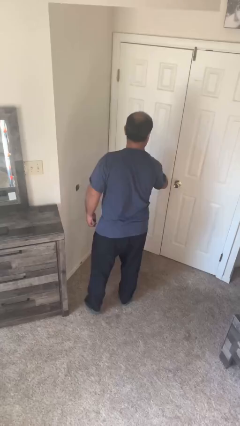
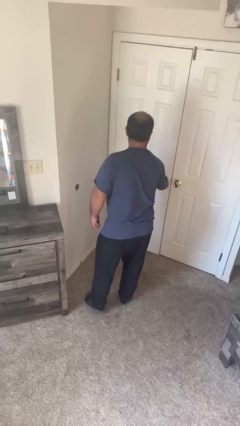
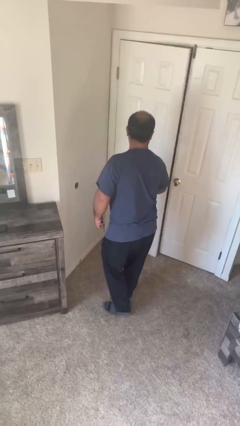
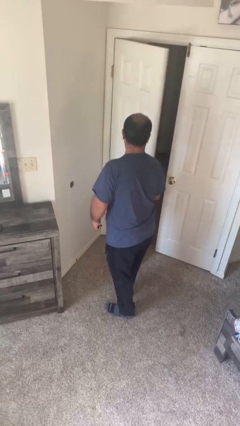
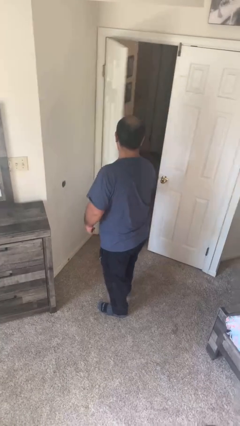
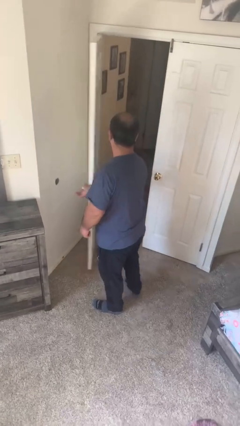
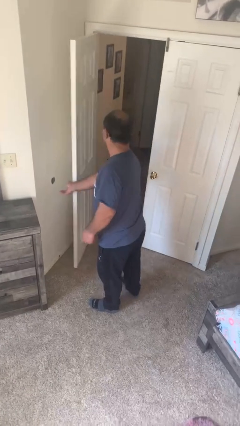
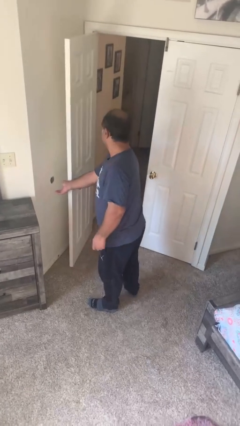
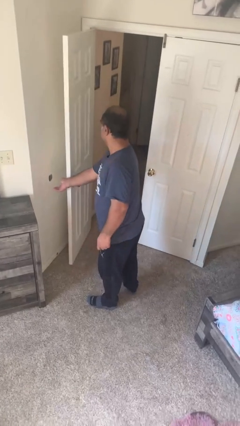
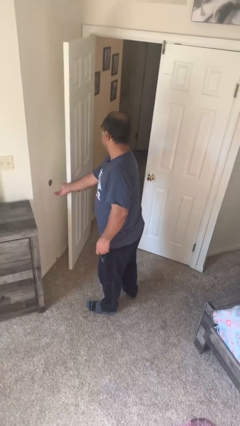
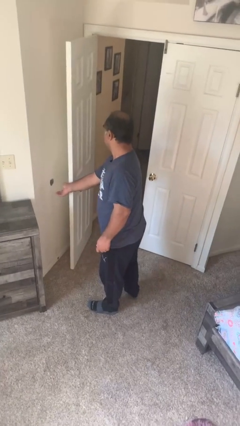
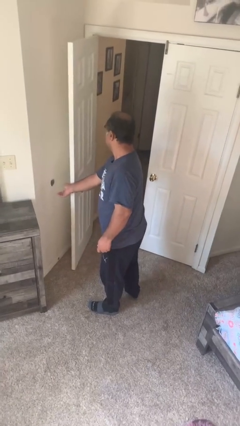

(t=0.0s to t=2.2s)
person opens facility door

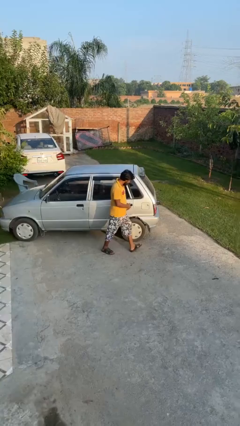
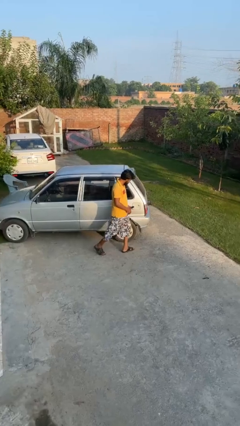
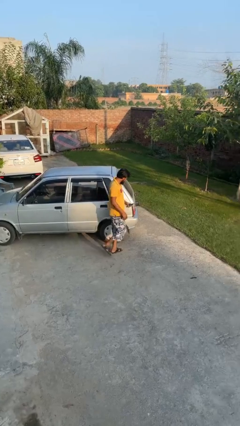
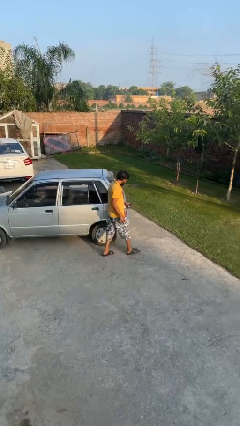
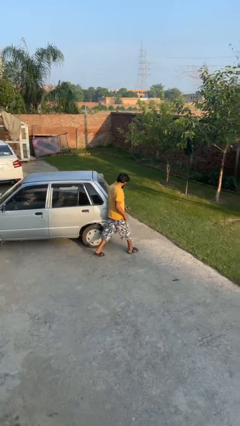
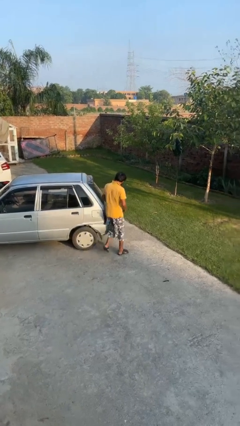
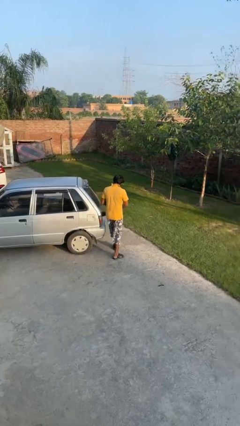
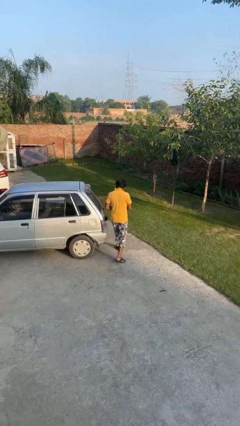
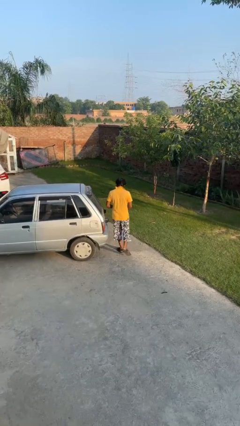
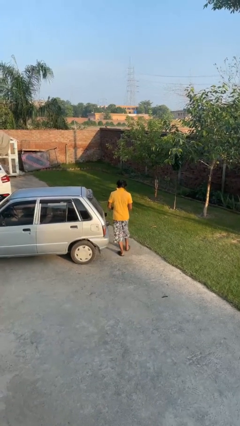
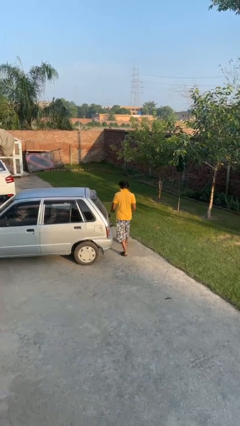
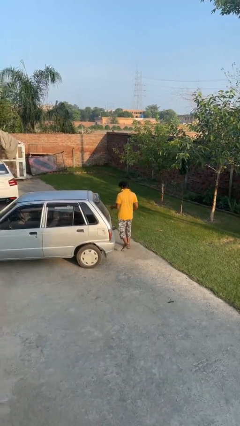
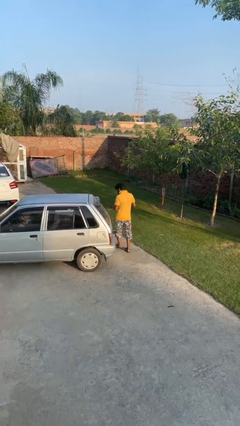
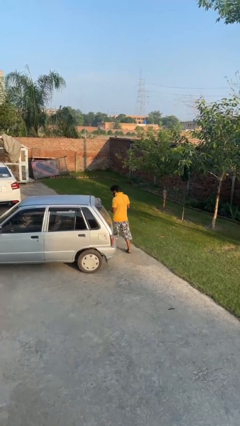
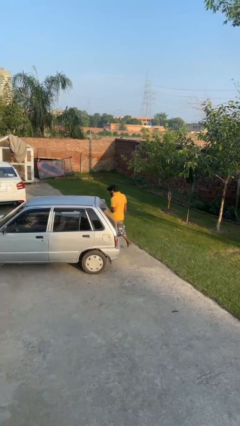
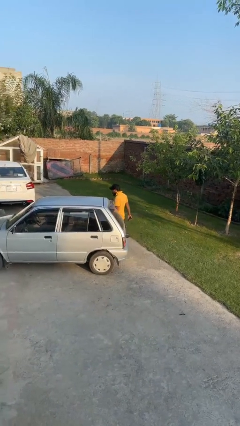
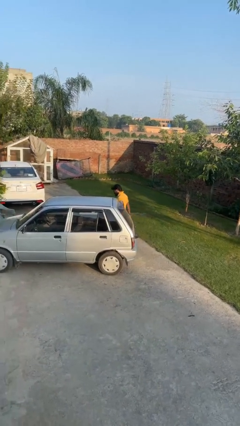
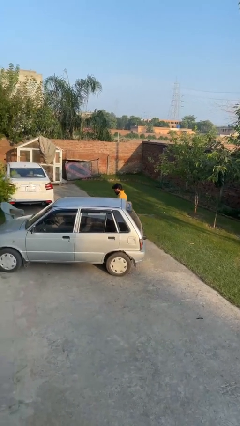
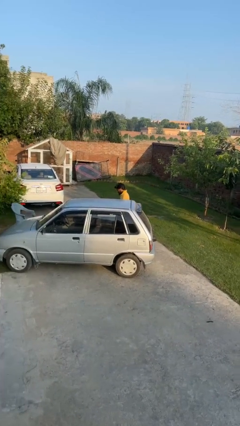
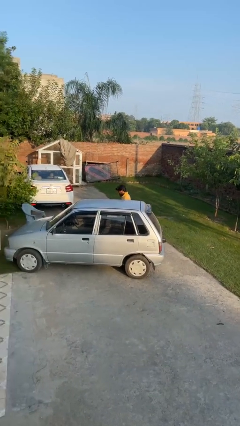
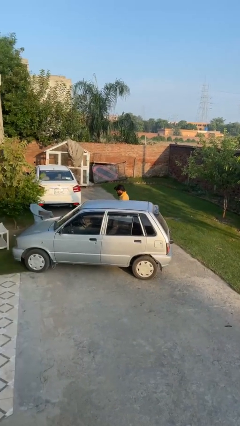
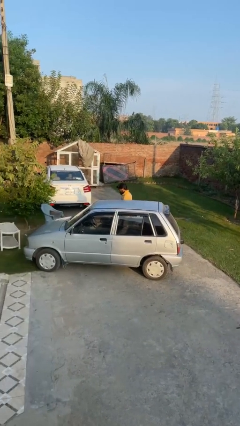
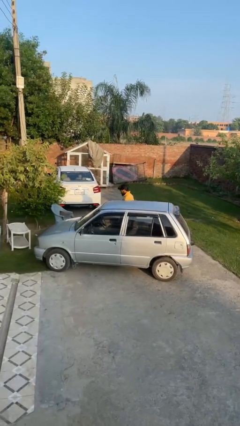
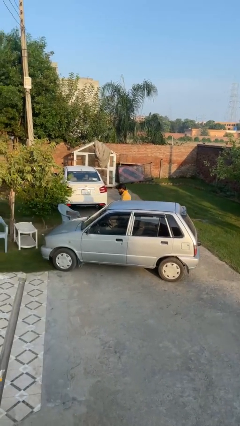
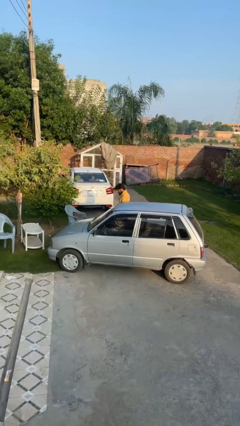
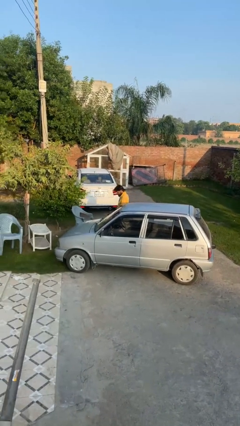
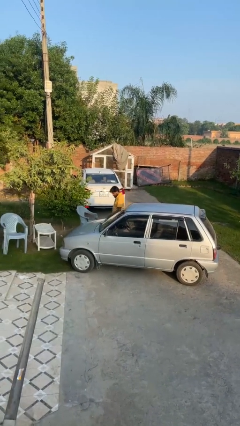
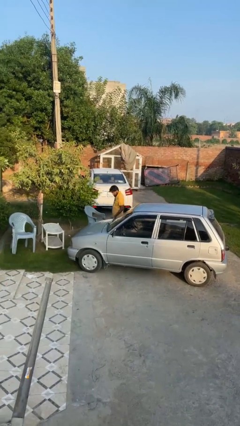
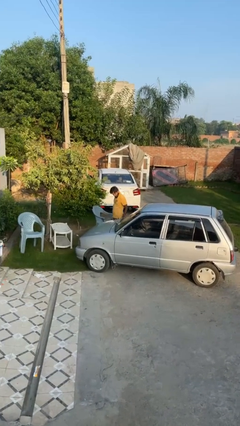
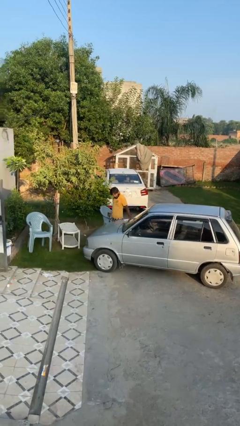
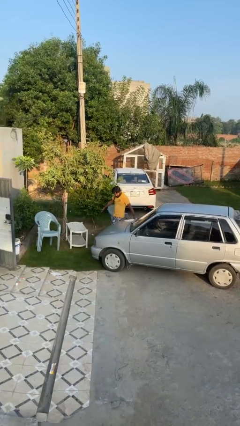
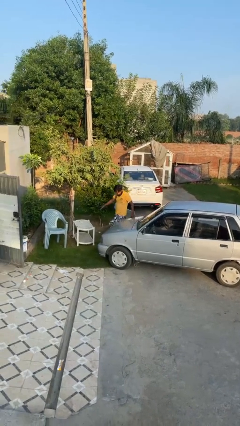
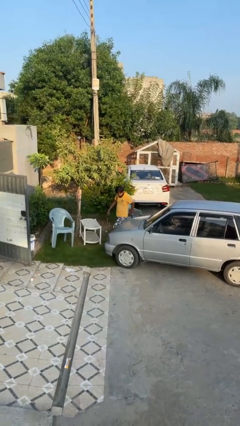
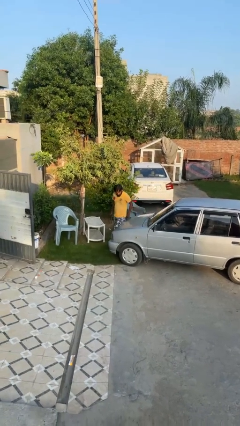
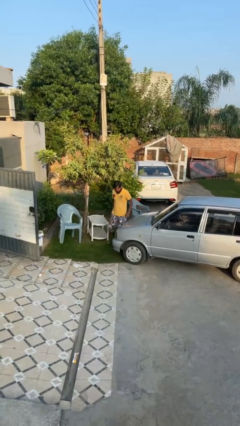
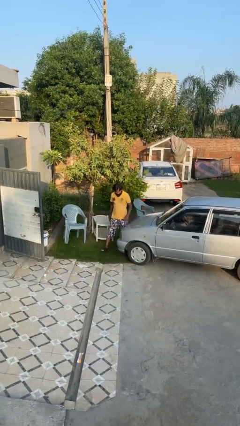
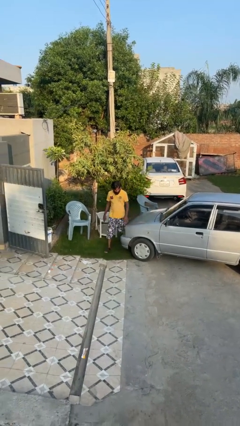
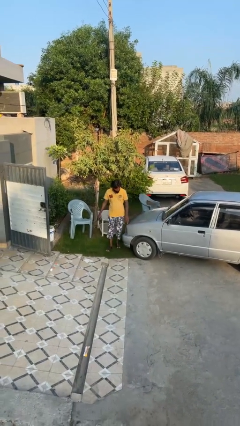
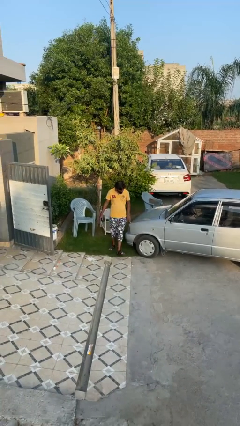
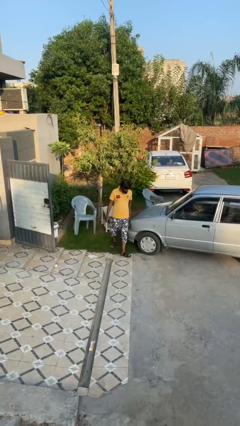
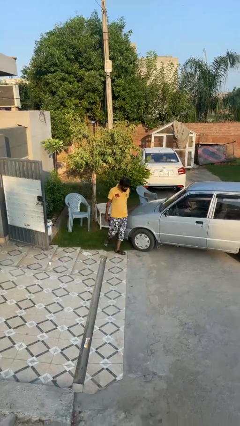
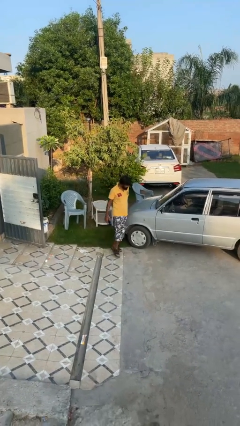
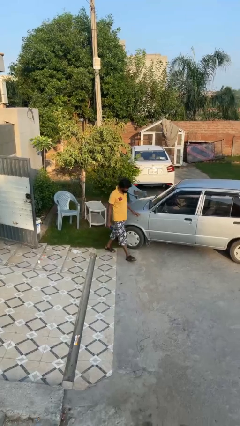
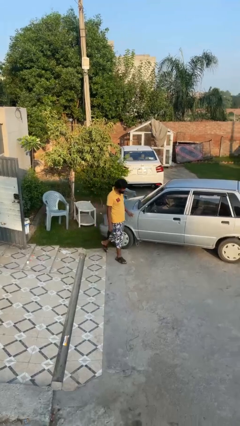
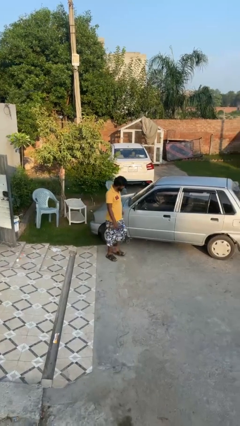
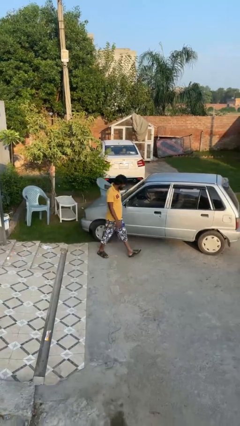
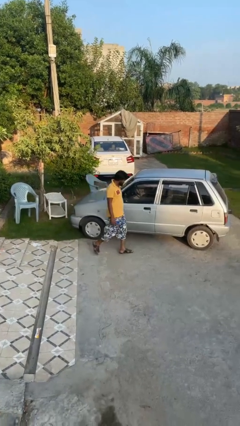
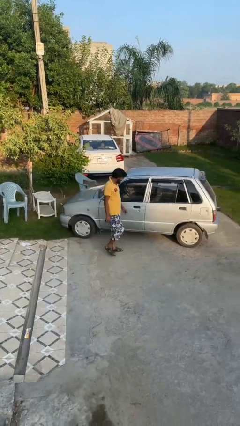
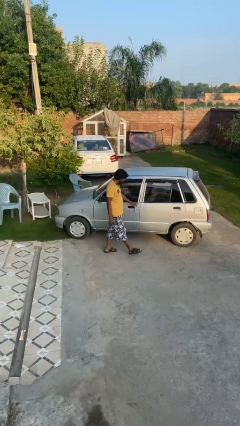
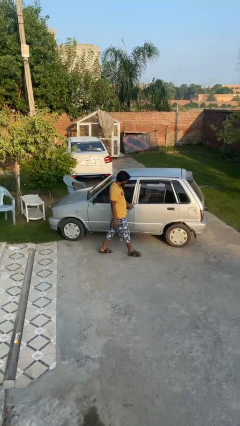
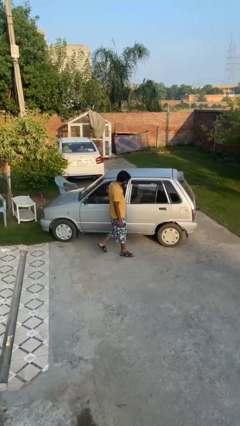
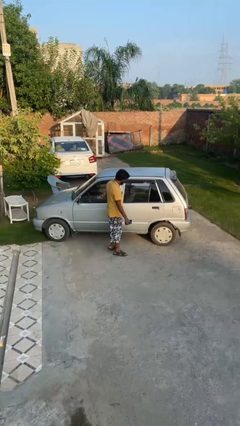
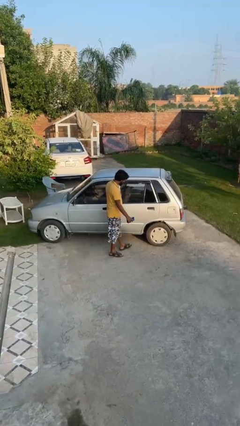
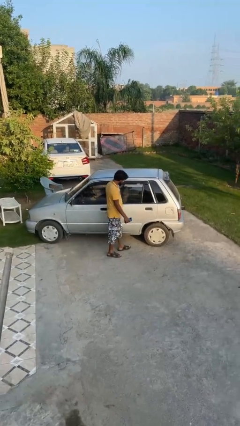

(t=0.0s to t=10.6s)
person walks around car

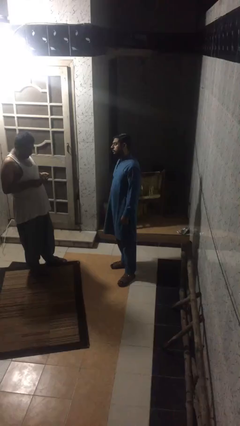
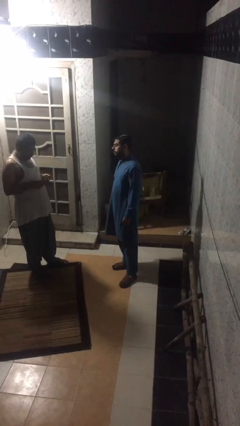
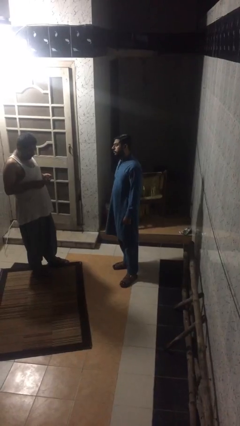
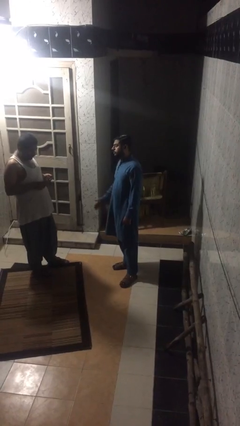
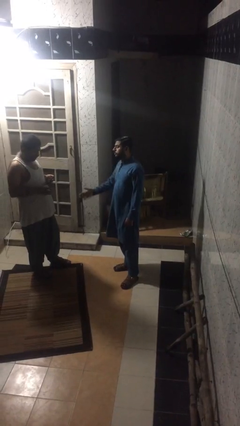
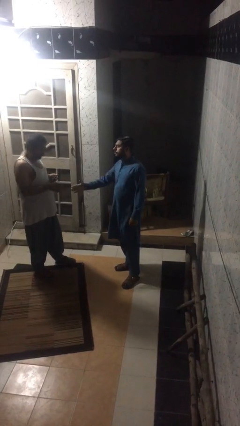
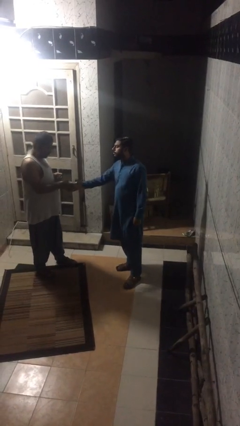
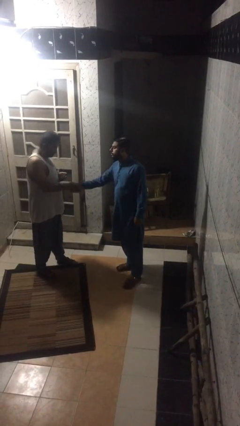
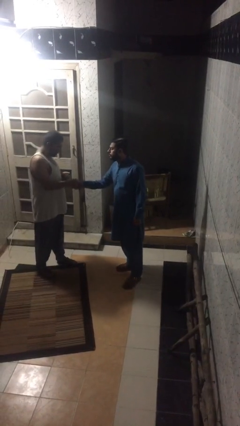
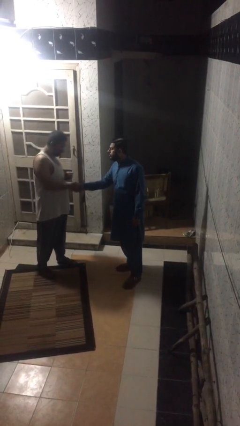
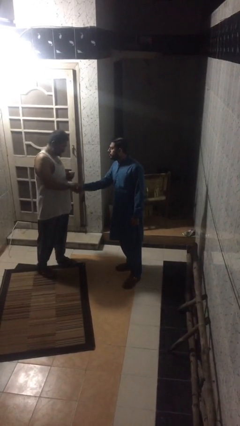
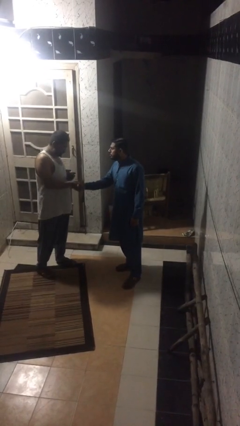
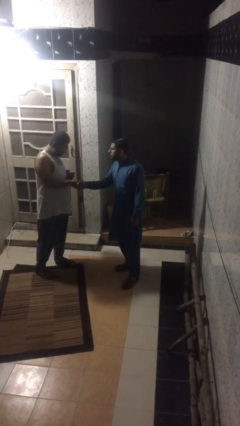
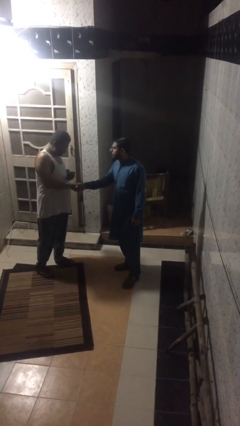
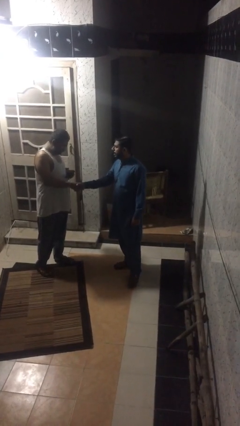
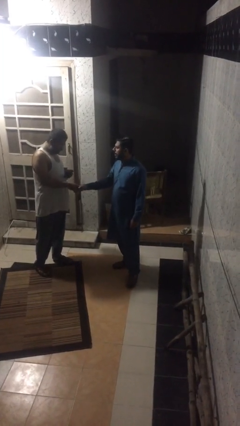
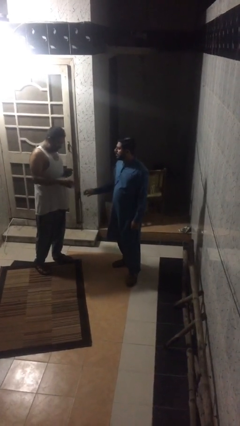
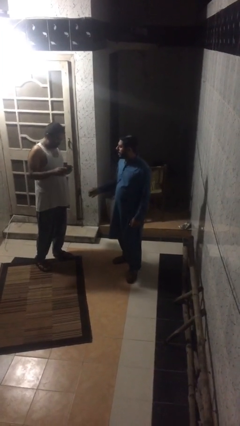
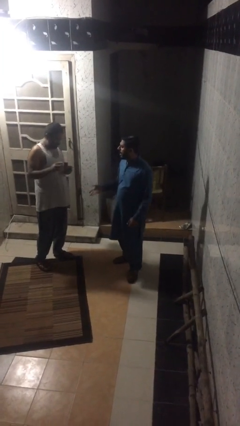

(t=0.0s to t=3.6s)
person shakes hand

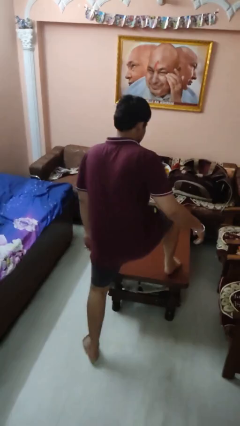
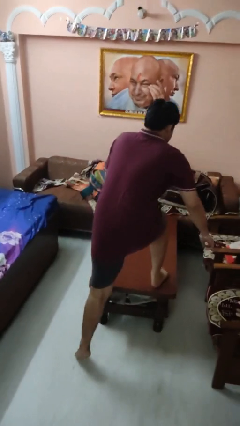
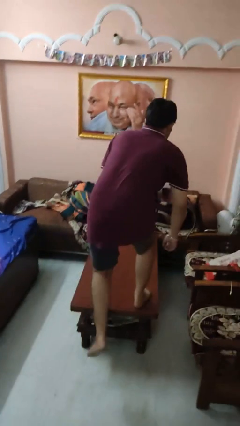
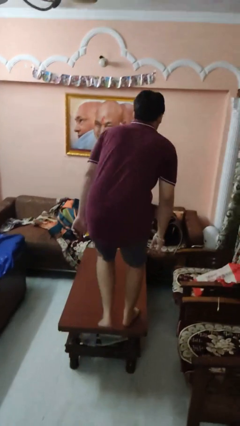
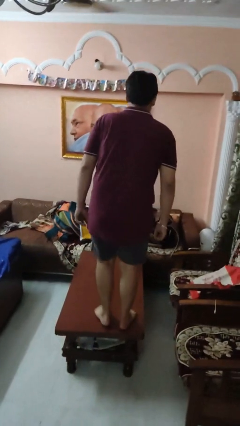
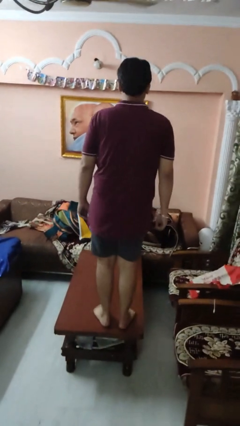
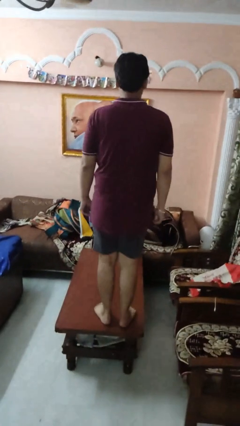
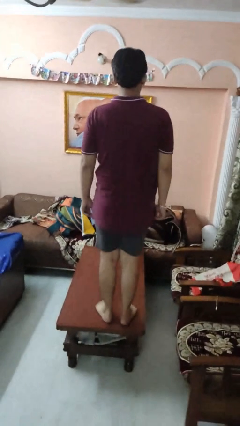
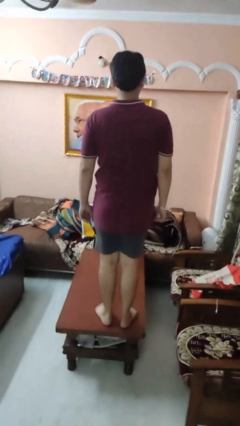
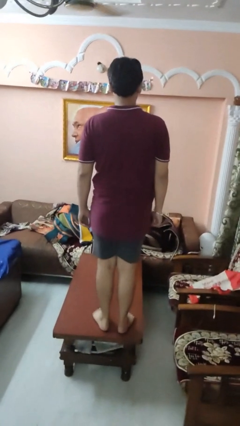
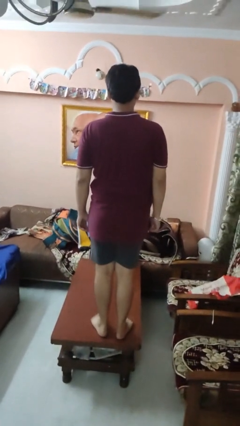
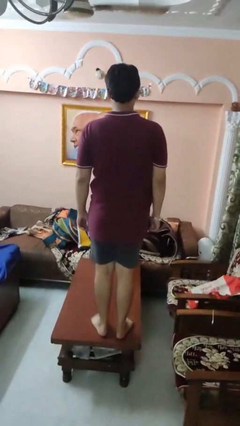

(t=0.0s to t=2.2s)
person climbs on table
